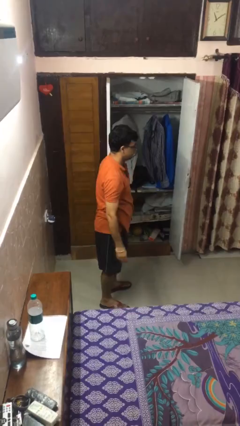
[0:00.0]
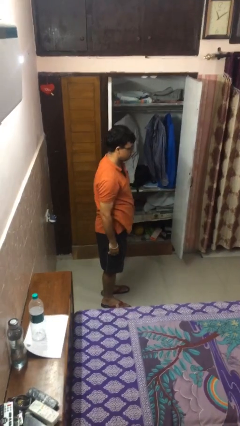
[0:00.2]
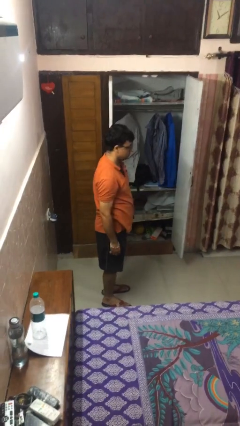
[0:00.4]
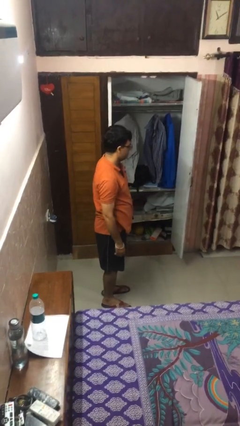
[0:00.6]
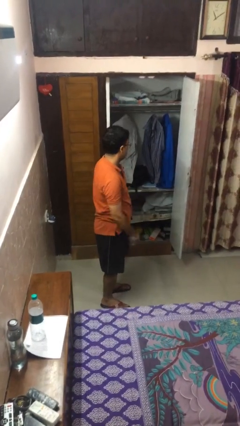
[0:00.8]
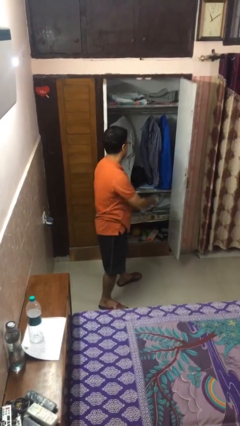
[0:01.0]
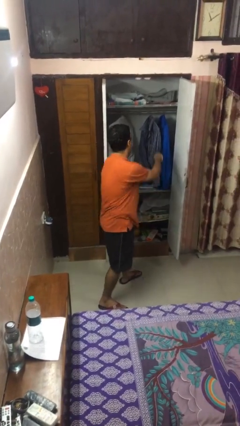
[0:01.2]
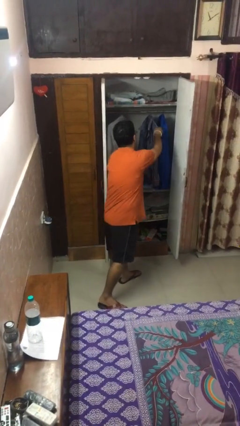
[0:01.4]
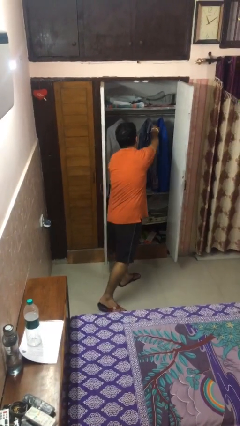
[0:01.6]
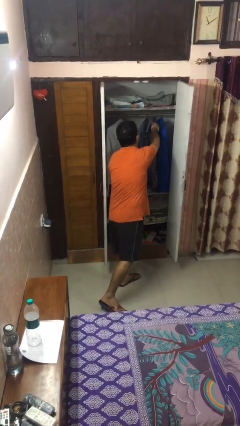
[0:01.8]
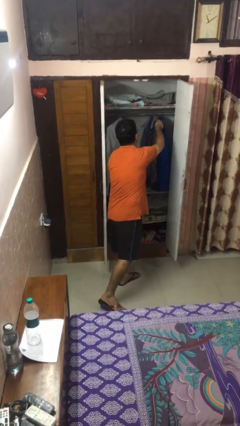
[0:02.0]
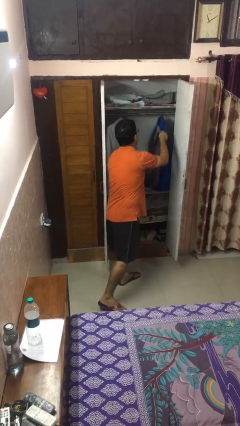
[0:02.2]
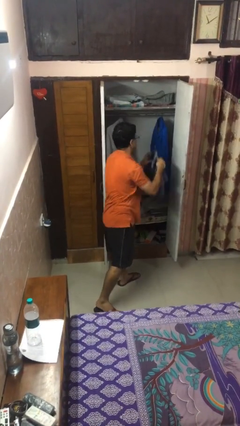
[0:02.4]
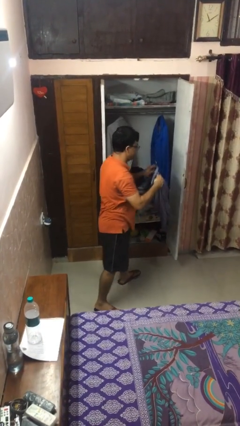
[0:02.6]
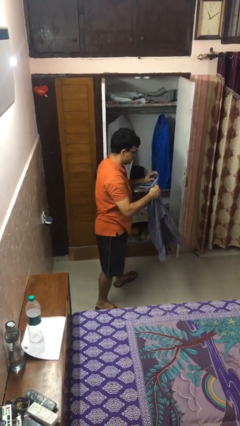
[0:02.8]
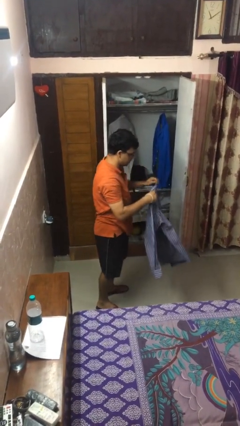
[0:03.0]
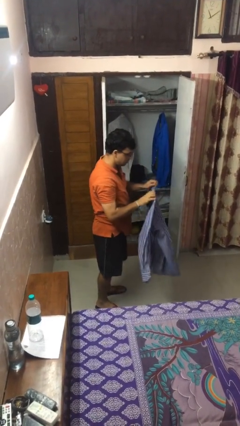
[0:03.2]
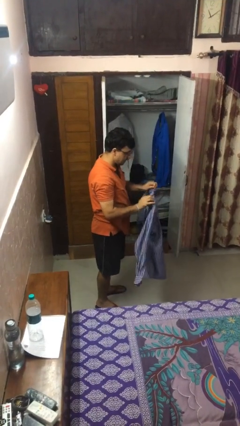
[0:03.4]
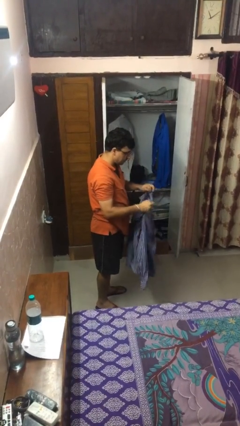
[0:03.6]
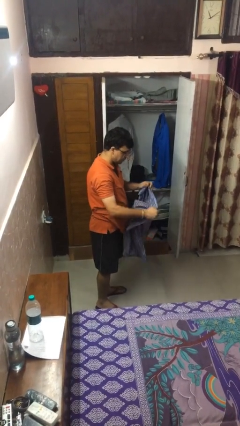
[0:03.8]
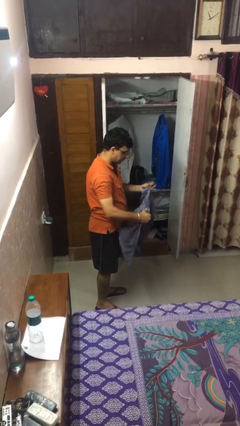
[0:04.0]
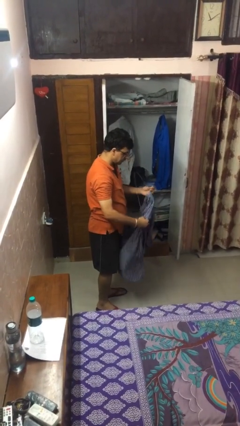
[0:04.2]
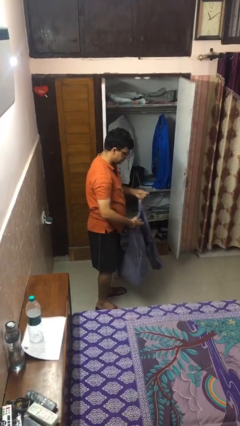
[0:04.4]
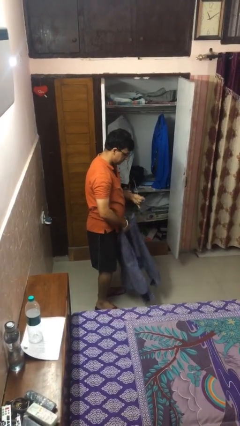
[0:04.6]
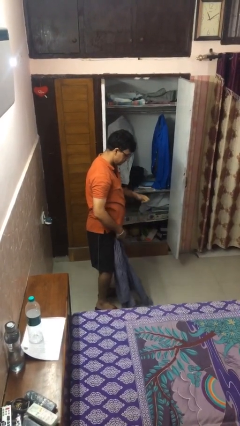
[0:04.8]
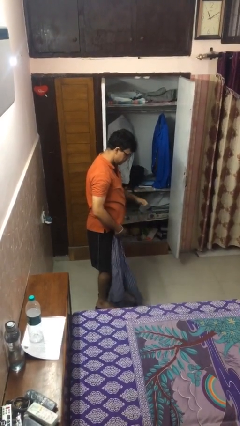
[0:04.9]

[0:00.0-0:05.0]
person takes clothes from closet

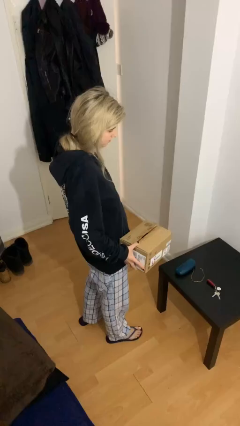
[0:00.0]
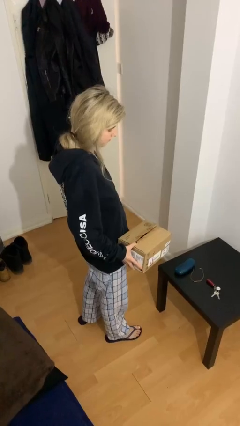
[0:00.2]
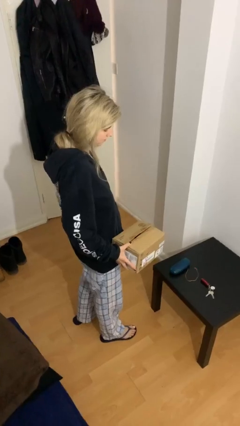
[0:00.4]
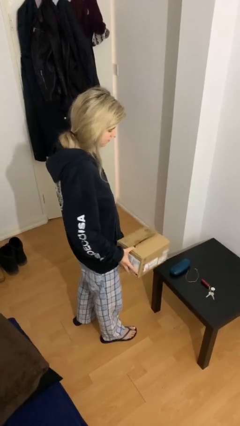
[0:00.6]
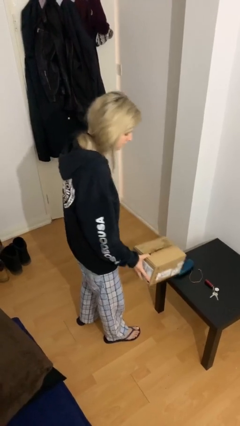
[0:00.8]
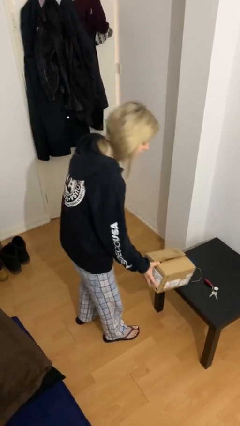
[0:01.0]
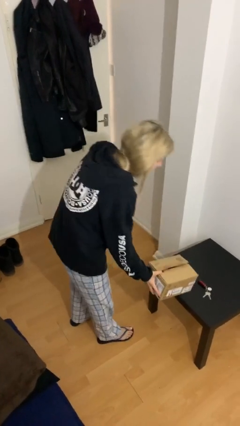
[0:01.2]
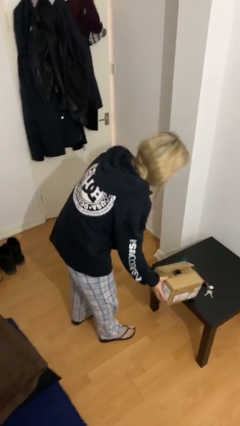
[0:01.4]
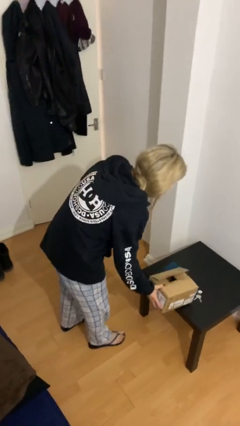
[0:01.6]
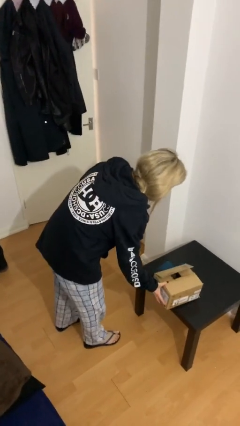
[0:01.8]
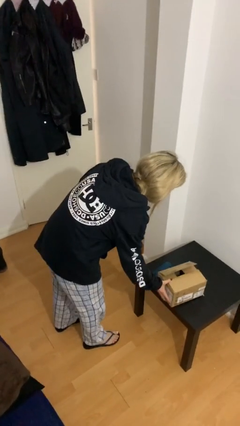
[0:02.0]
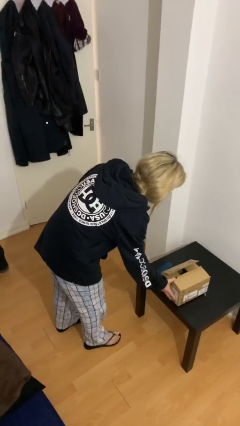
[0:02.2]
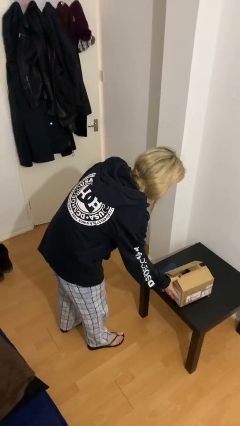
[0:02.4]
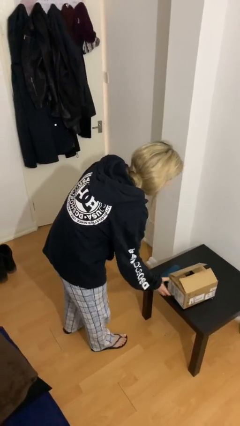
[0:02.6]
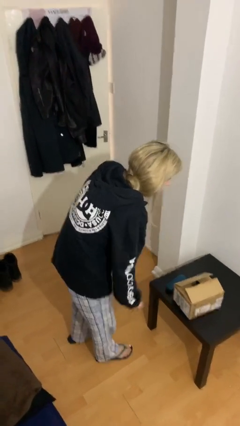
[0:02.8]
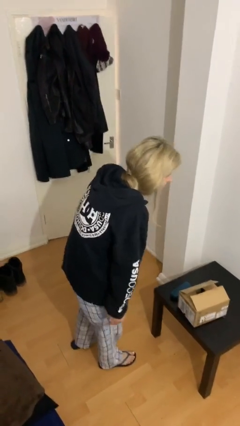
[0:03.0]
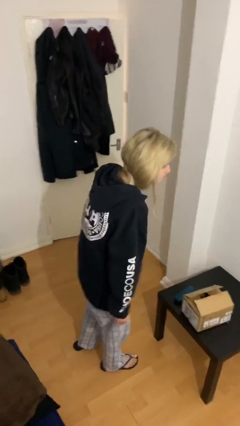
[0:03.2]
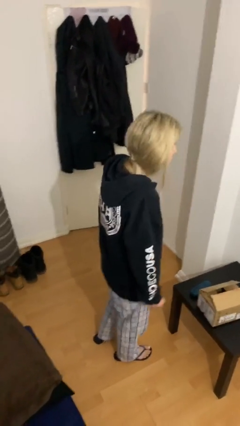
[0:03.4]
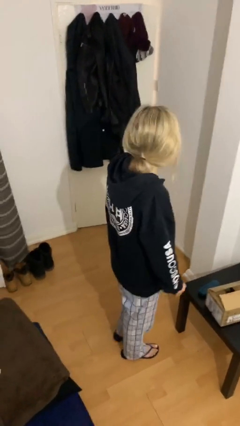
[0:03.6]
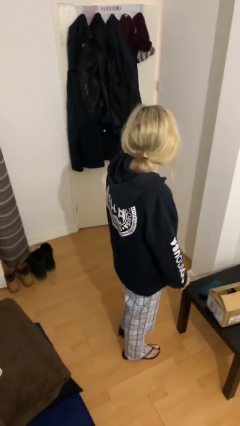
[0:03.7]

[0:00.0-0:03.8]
person puts down object on table

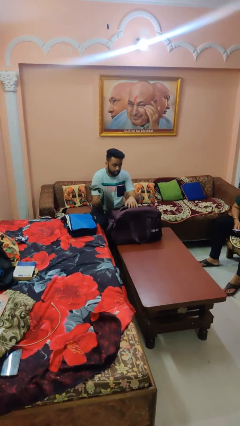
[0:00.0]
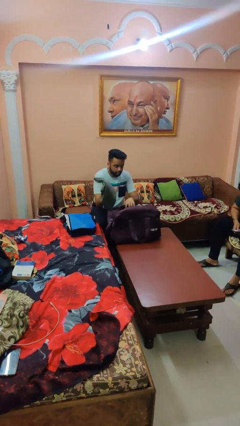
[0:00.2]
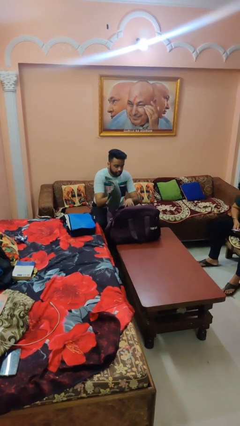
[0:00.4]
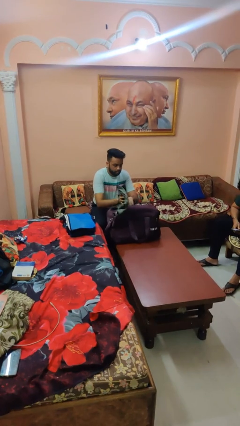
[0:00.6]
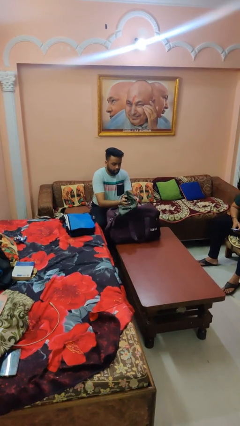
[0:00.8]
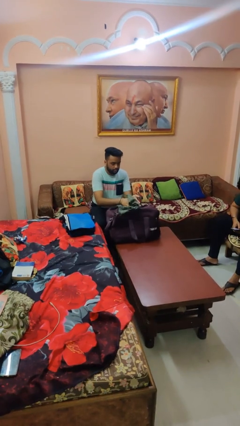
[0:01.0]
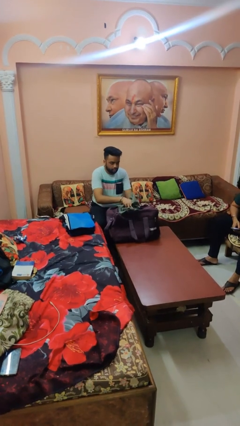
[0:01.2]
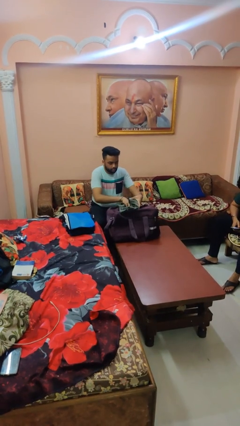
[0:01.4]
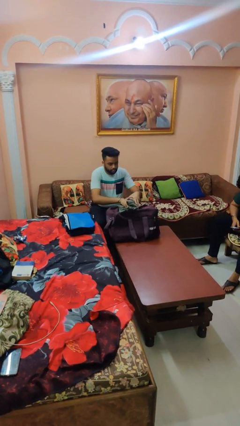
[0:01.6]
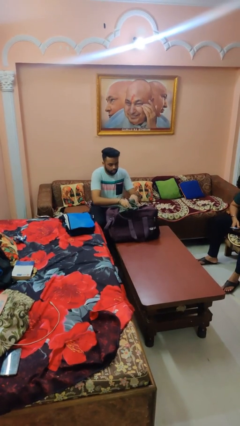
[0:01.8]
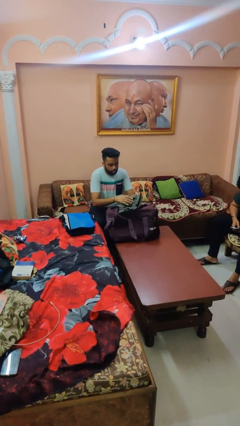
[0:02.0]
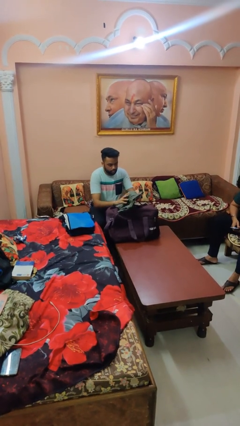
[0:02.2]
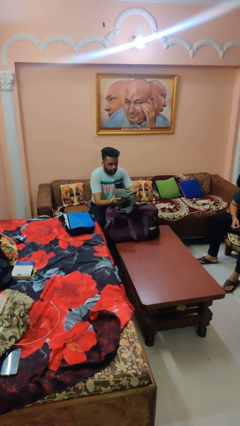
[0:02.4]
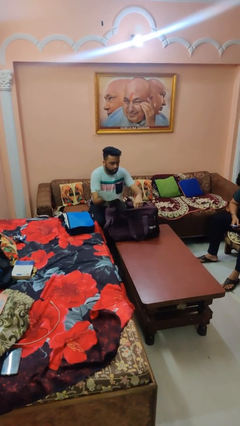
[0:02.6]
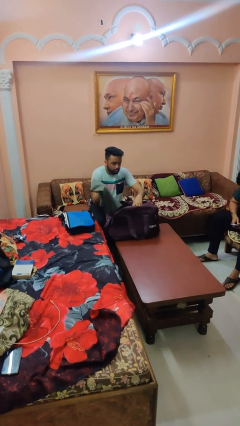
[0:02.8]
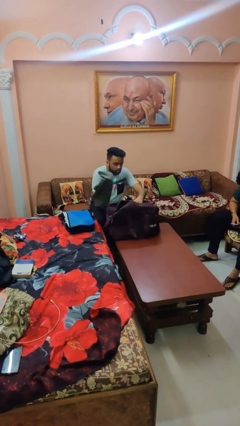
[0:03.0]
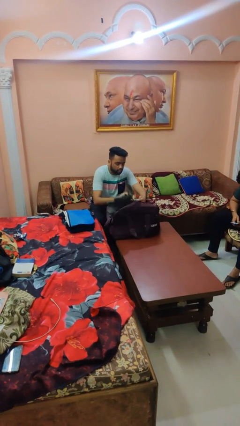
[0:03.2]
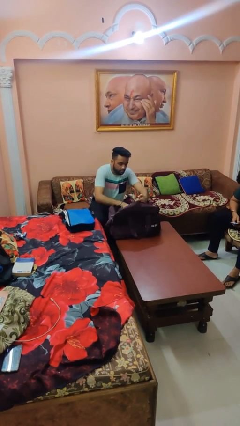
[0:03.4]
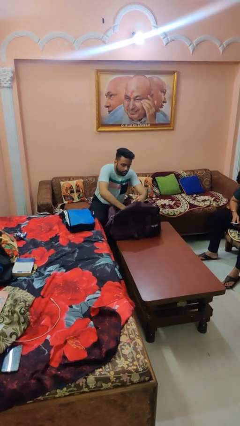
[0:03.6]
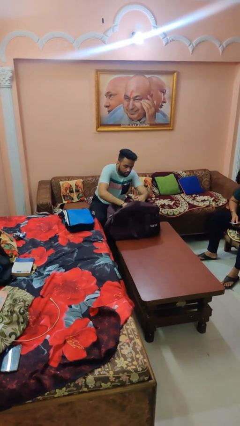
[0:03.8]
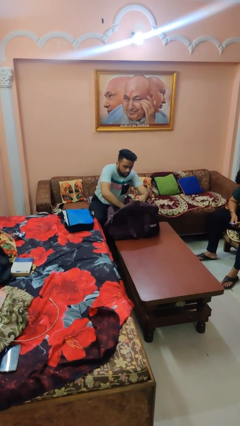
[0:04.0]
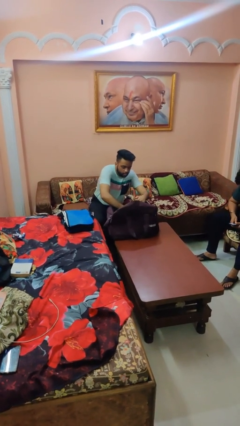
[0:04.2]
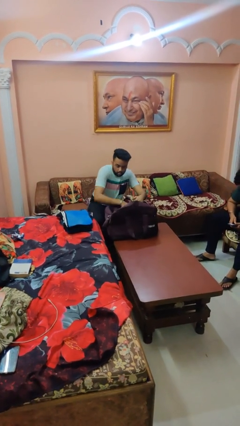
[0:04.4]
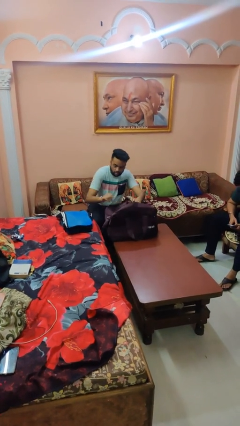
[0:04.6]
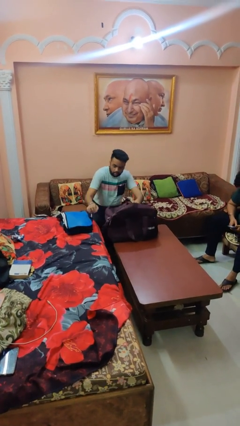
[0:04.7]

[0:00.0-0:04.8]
person loads clothes into suitcase

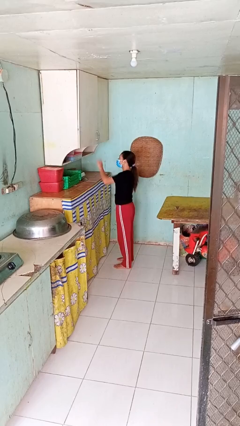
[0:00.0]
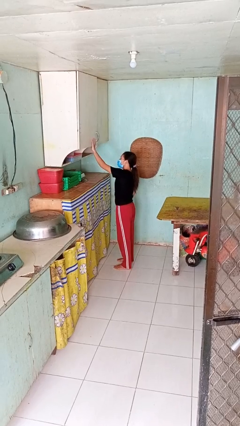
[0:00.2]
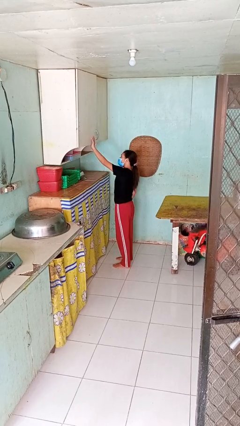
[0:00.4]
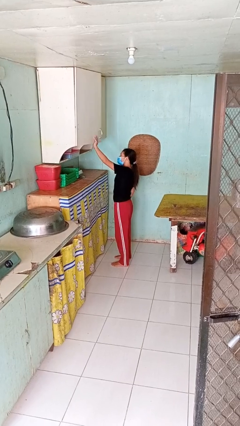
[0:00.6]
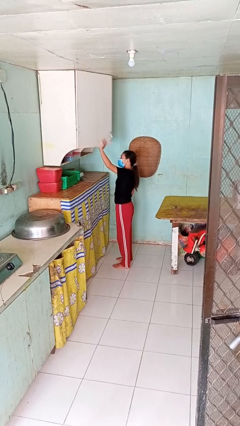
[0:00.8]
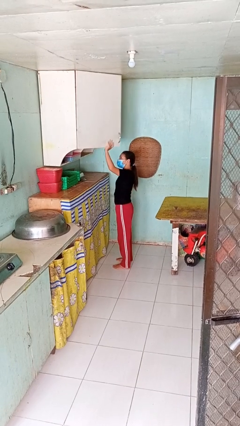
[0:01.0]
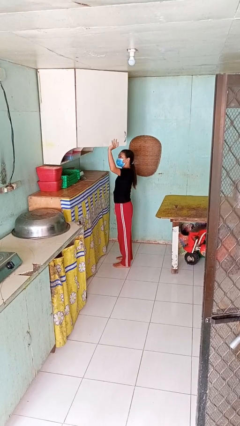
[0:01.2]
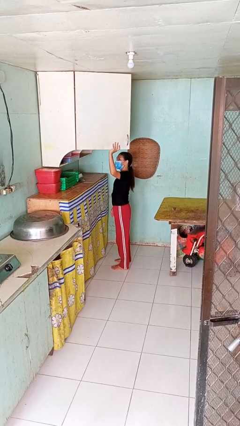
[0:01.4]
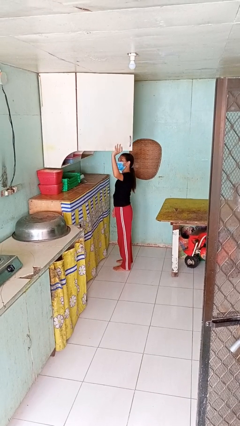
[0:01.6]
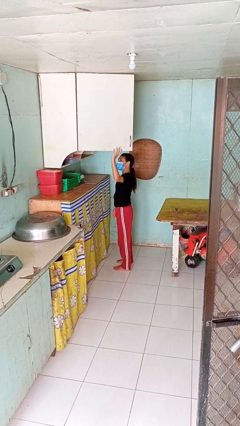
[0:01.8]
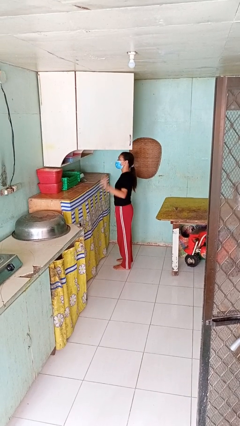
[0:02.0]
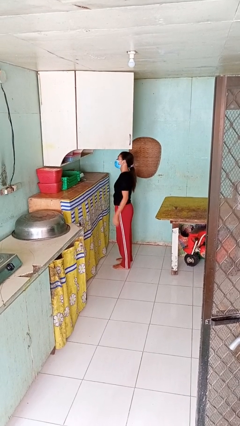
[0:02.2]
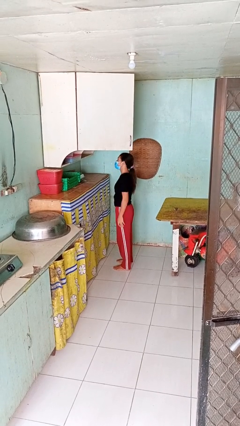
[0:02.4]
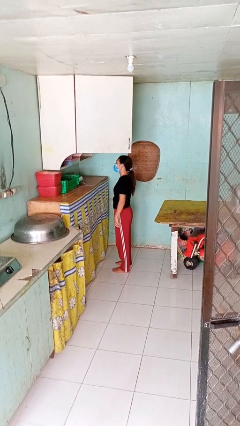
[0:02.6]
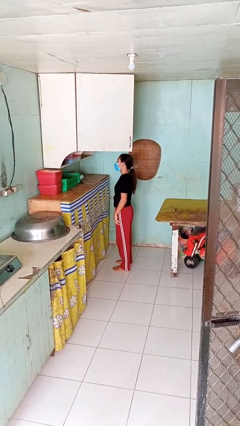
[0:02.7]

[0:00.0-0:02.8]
person opens cabinet

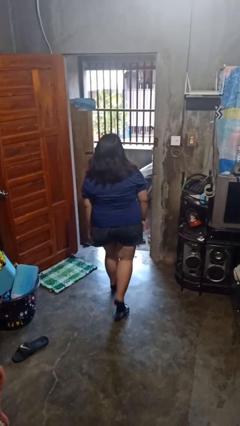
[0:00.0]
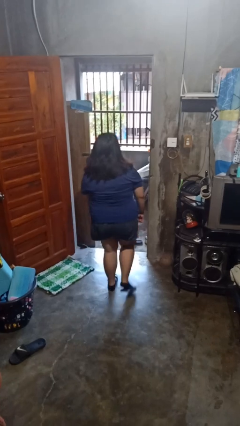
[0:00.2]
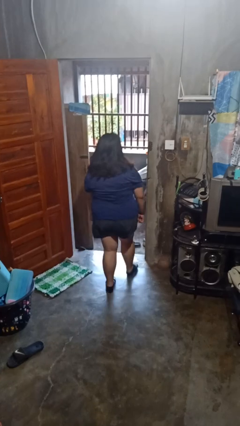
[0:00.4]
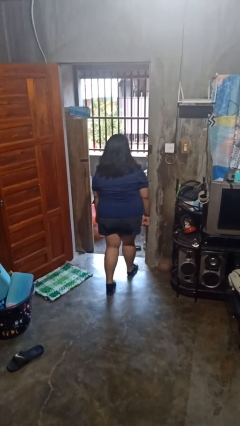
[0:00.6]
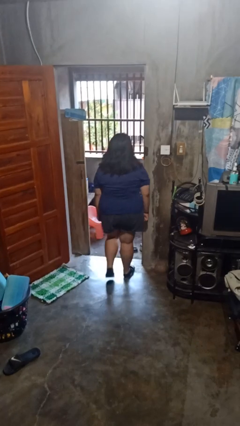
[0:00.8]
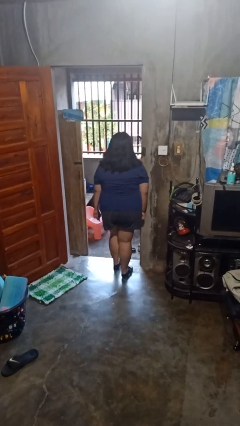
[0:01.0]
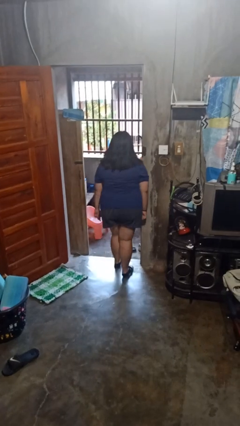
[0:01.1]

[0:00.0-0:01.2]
person bumps into wall
